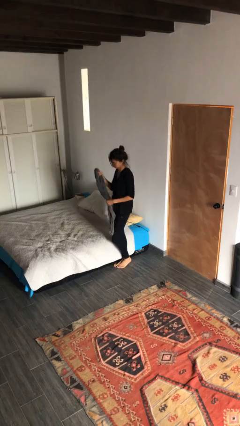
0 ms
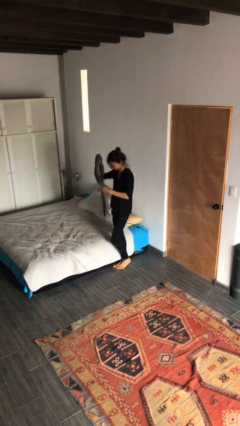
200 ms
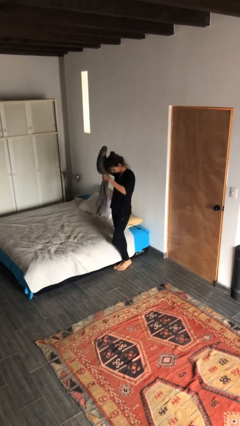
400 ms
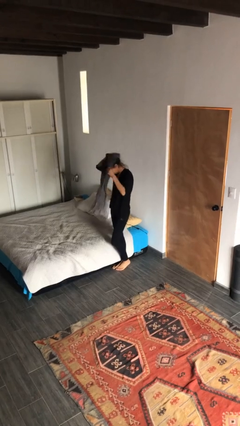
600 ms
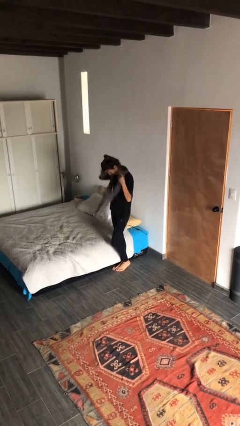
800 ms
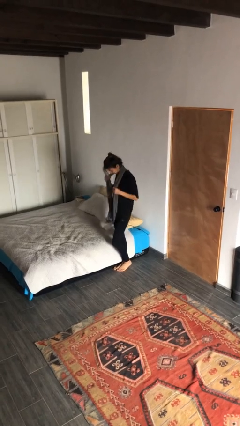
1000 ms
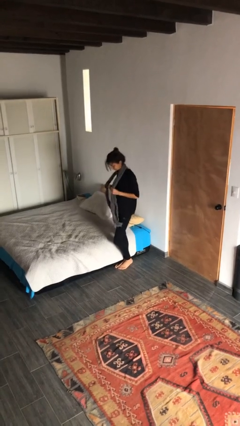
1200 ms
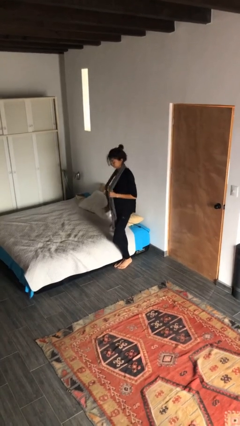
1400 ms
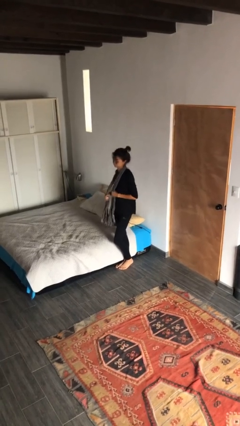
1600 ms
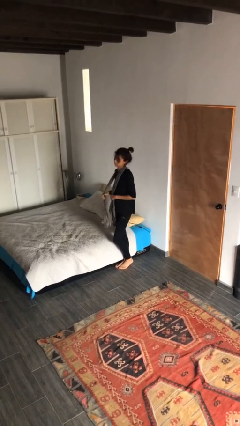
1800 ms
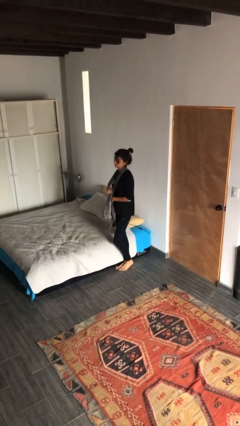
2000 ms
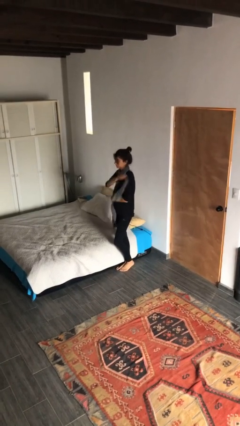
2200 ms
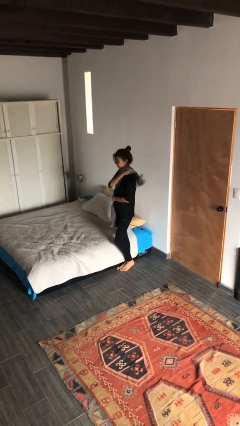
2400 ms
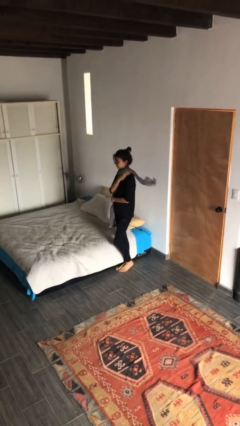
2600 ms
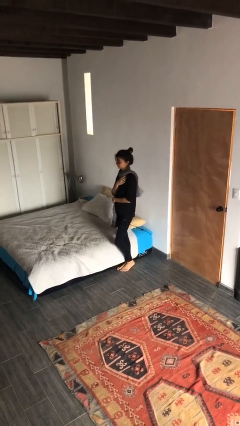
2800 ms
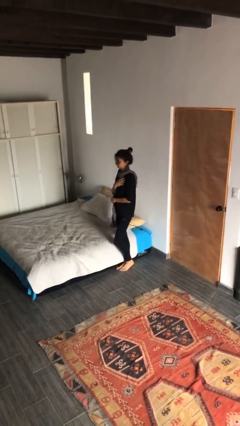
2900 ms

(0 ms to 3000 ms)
person puts on scarf

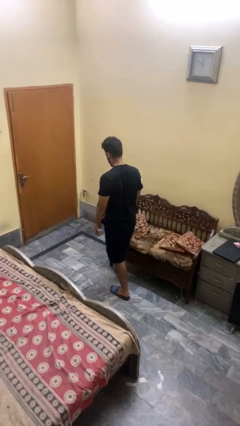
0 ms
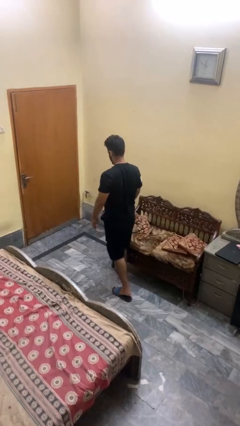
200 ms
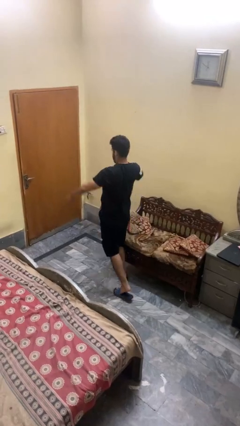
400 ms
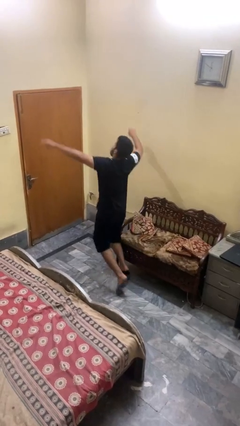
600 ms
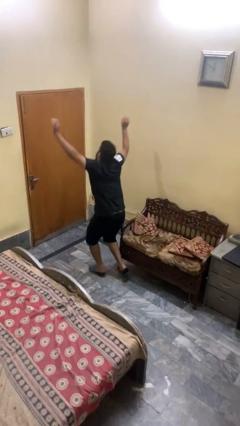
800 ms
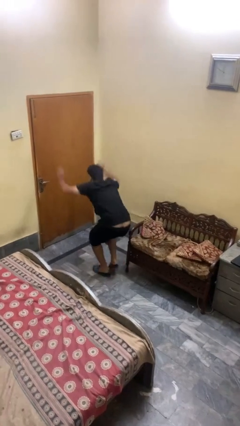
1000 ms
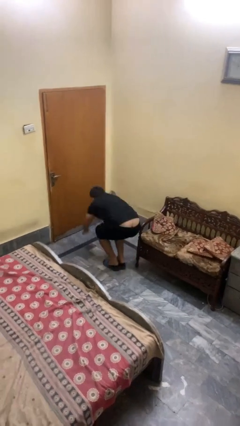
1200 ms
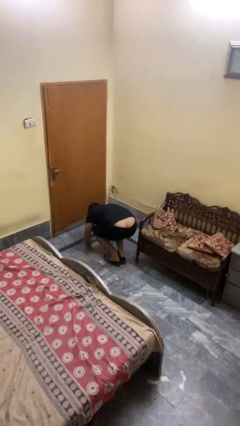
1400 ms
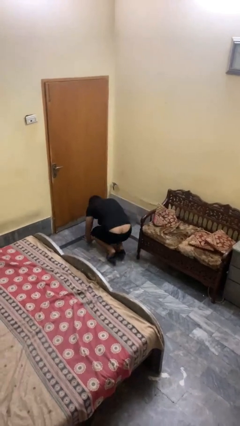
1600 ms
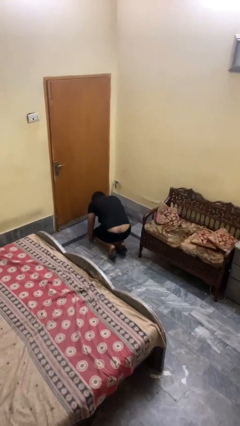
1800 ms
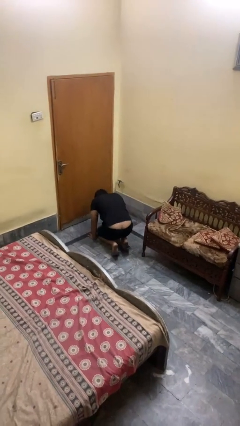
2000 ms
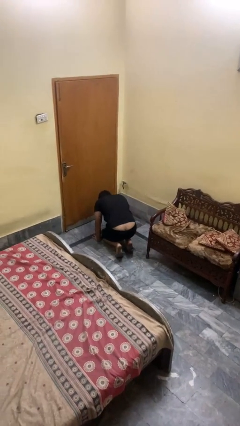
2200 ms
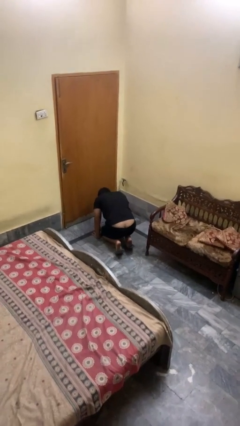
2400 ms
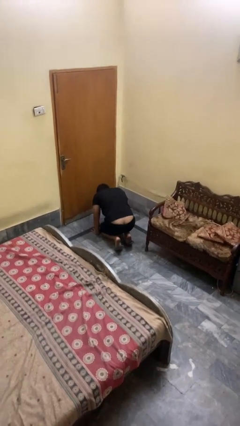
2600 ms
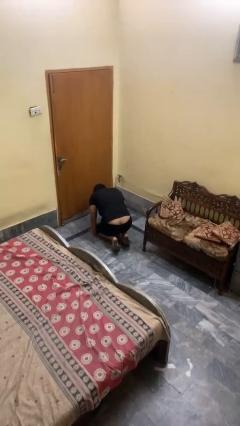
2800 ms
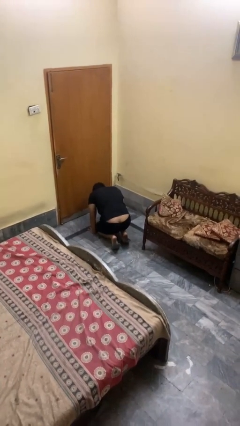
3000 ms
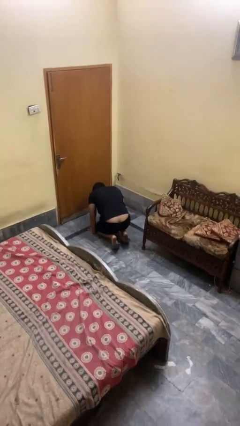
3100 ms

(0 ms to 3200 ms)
person trips on object on floor

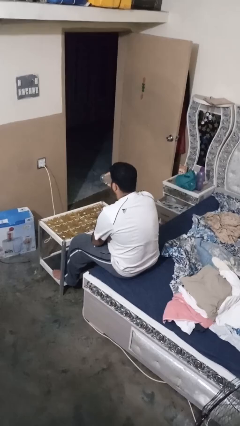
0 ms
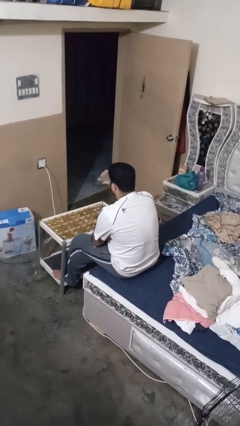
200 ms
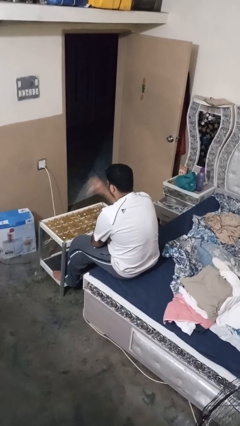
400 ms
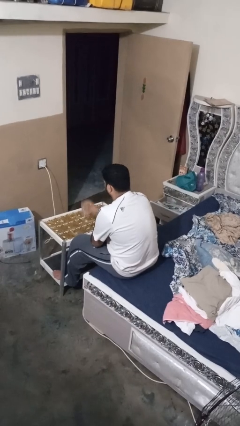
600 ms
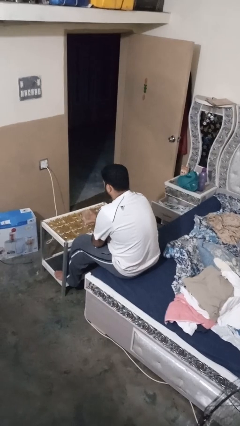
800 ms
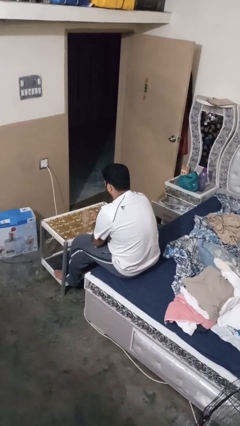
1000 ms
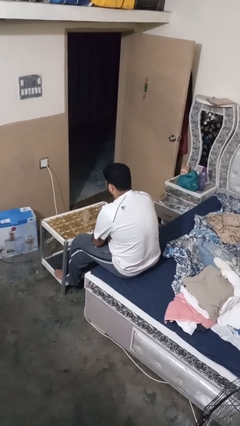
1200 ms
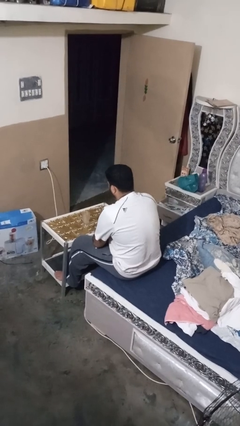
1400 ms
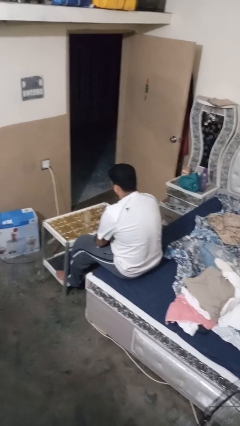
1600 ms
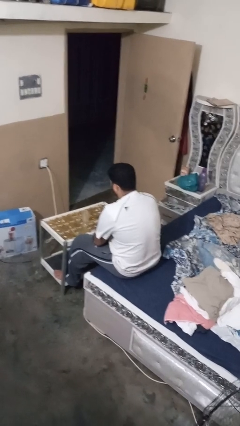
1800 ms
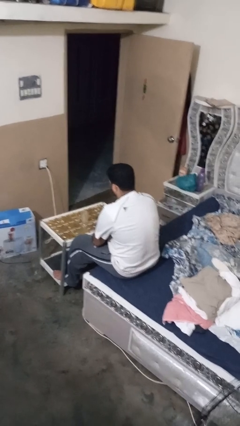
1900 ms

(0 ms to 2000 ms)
person puts down object on table

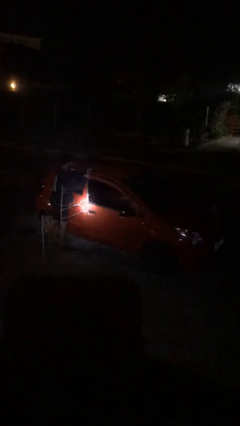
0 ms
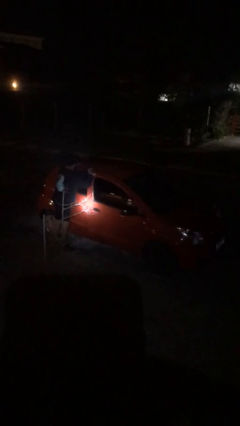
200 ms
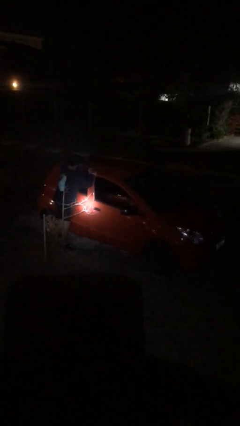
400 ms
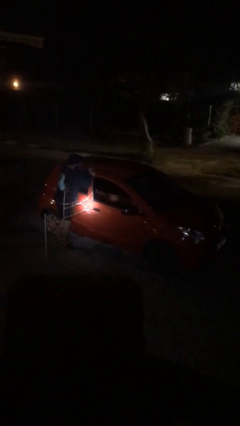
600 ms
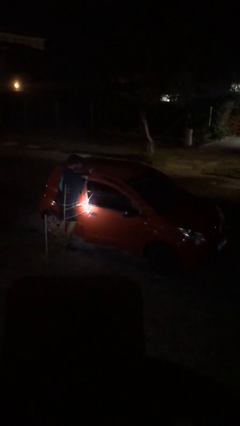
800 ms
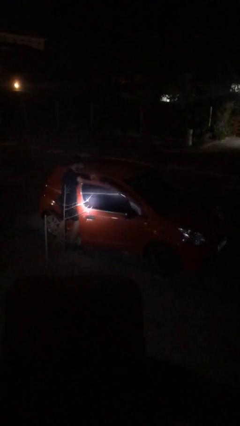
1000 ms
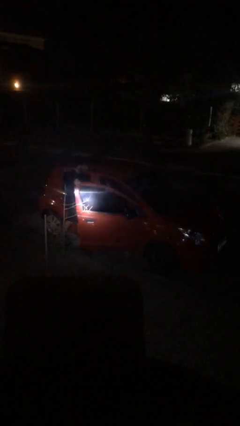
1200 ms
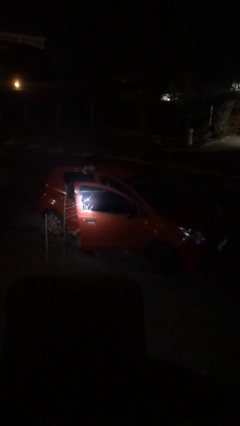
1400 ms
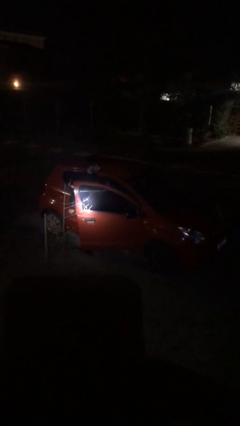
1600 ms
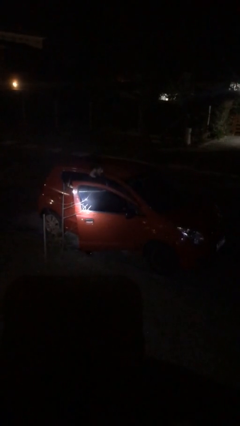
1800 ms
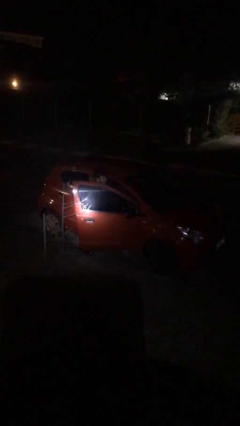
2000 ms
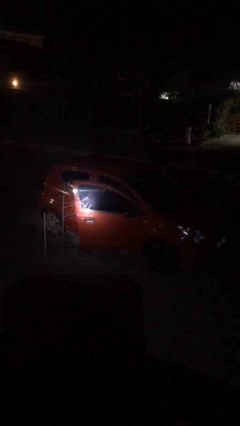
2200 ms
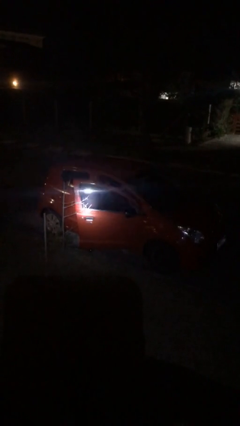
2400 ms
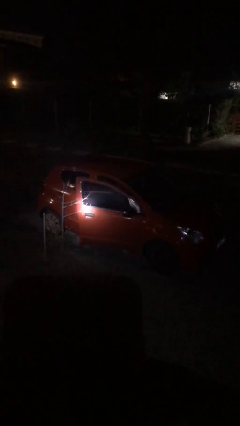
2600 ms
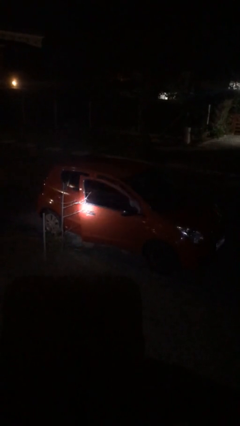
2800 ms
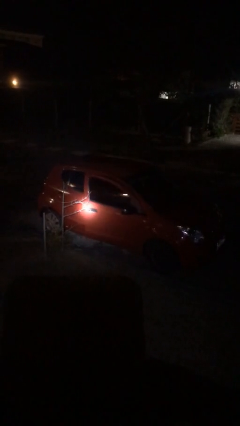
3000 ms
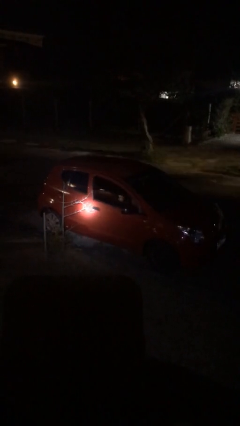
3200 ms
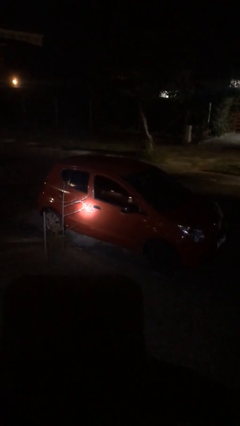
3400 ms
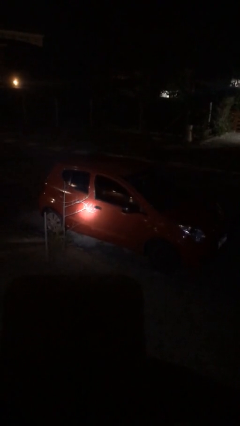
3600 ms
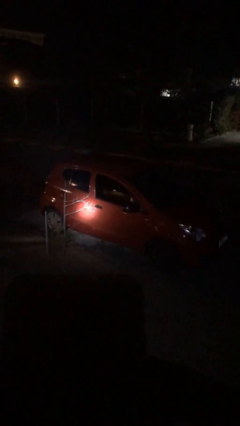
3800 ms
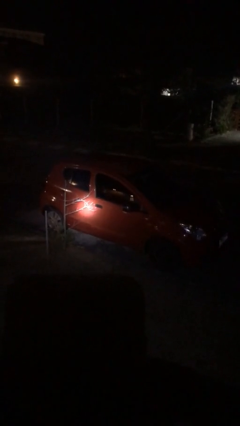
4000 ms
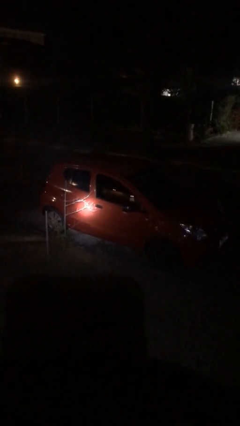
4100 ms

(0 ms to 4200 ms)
car picks up person

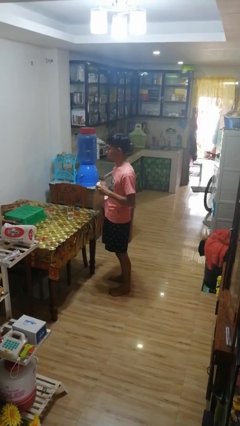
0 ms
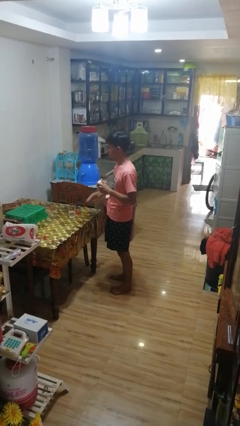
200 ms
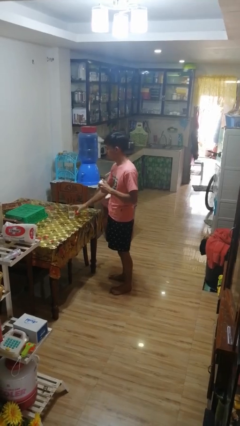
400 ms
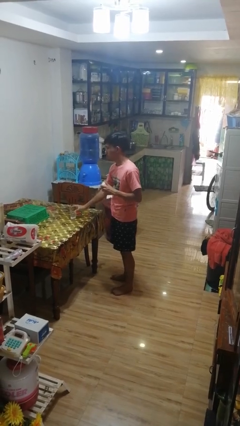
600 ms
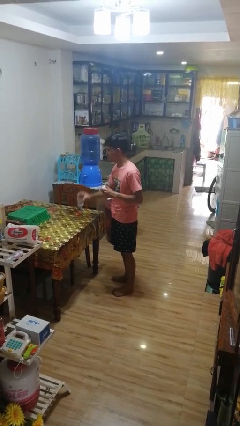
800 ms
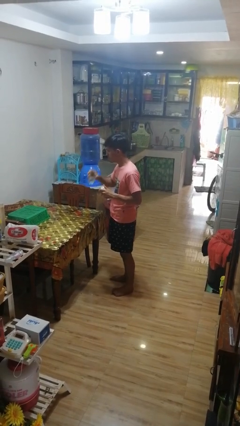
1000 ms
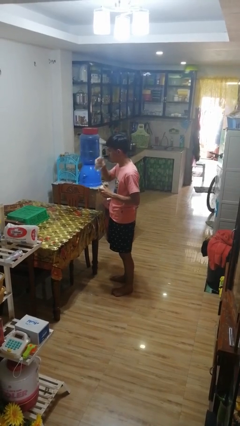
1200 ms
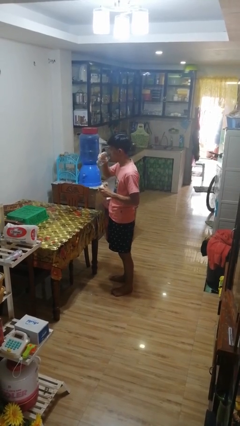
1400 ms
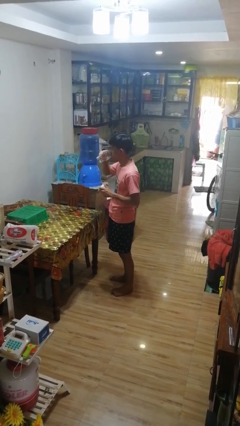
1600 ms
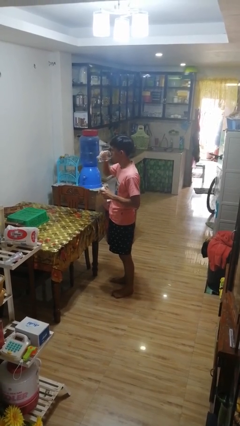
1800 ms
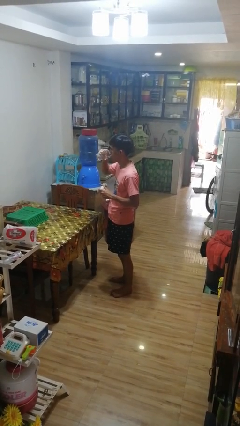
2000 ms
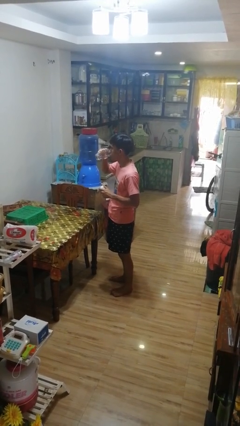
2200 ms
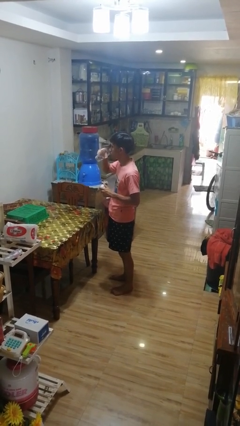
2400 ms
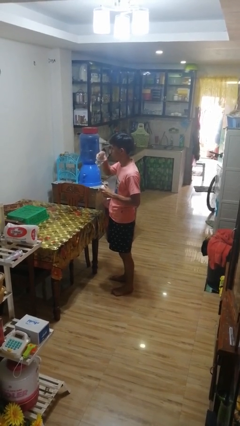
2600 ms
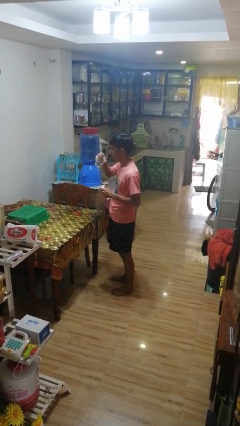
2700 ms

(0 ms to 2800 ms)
person drinks from cup

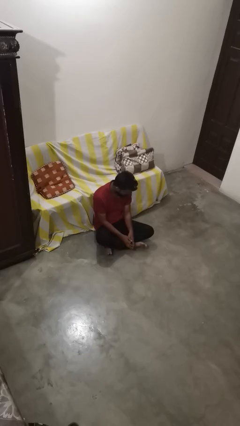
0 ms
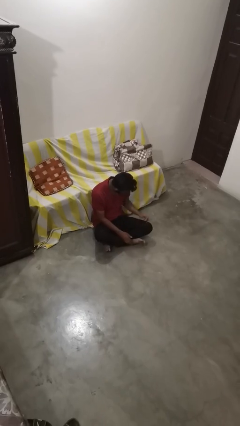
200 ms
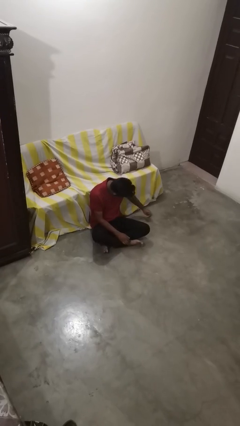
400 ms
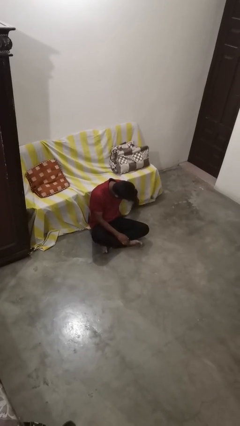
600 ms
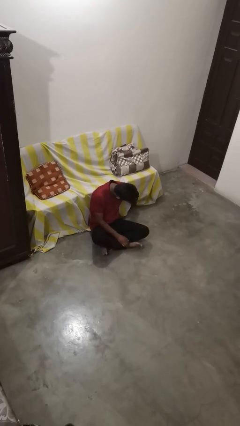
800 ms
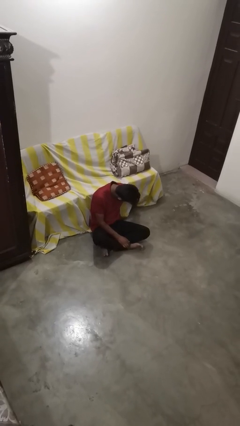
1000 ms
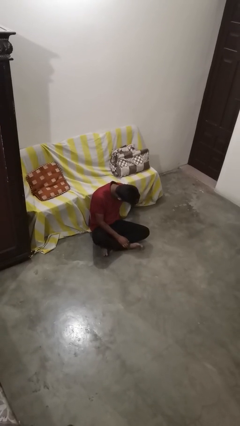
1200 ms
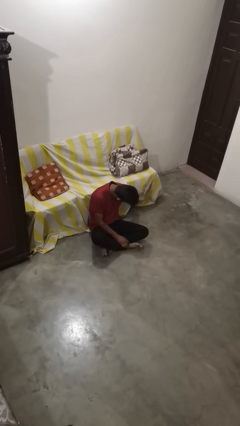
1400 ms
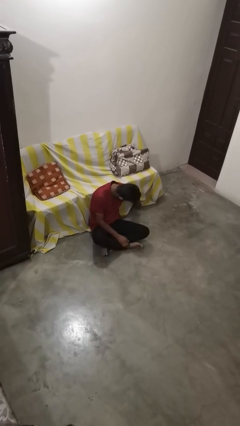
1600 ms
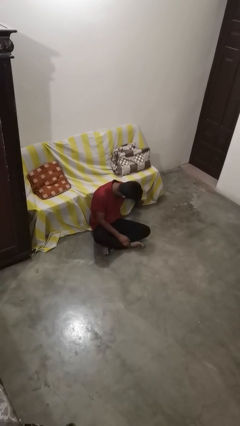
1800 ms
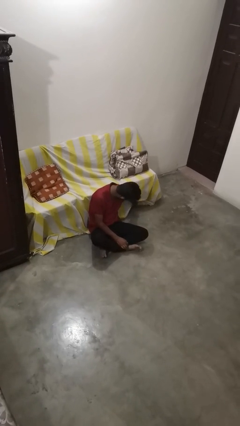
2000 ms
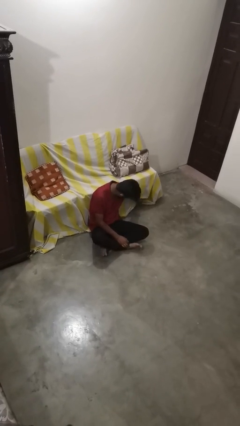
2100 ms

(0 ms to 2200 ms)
person searches under couch
